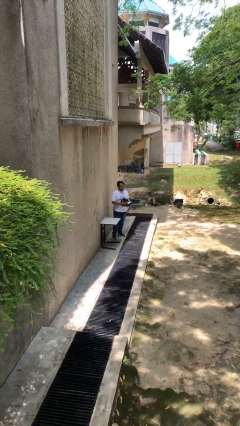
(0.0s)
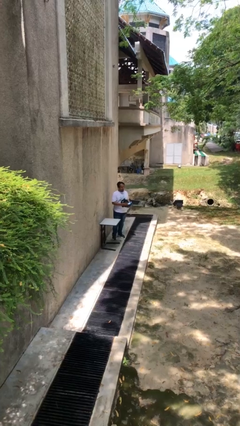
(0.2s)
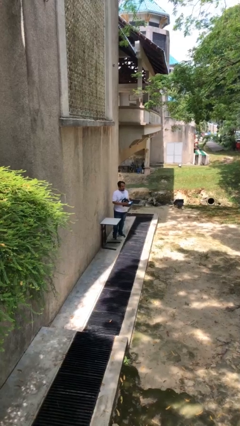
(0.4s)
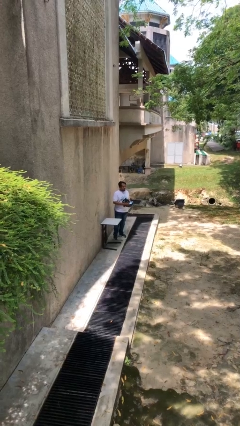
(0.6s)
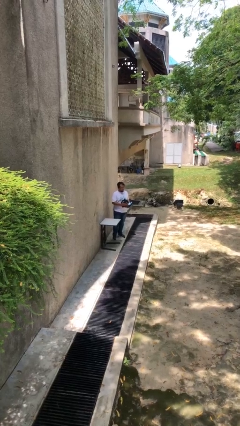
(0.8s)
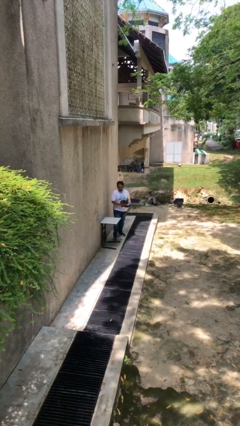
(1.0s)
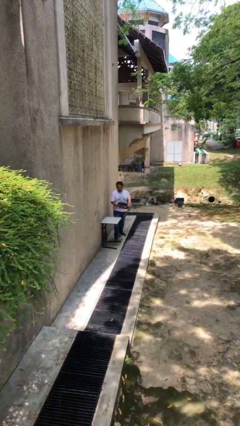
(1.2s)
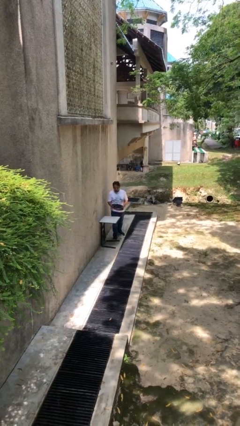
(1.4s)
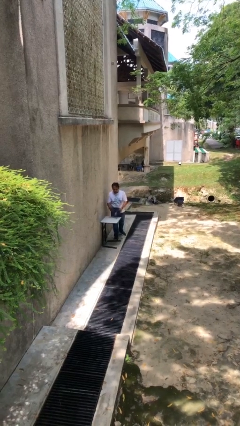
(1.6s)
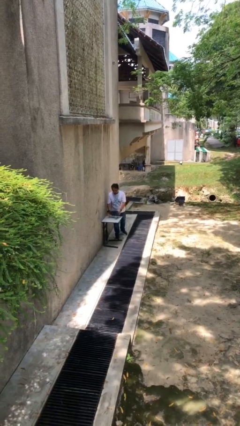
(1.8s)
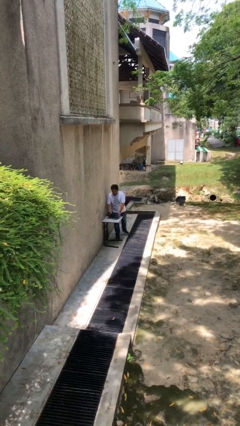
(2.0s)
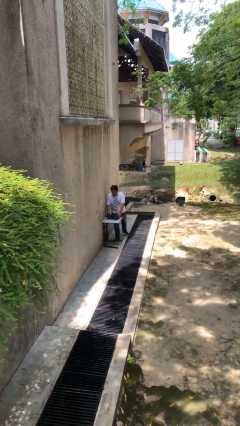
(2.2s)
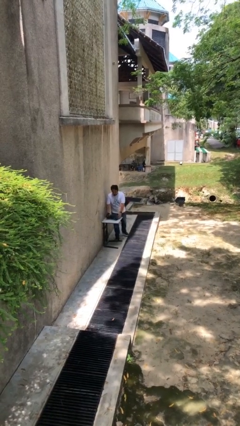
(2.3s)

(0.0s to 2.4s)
person puts down object on table

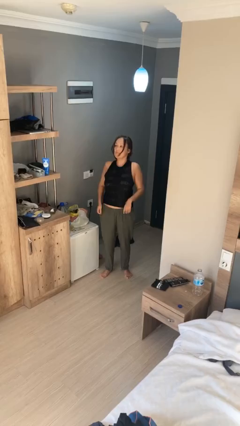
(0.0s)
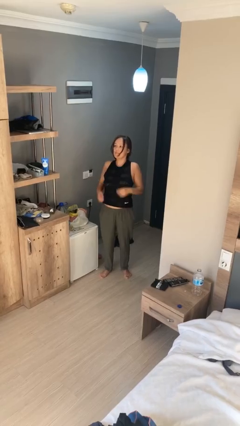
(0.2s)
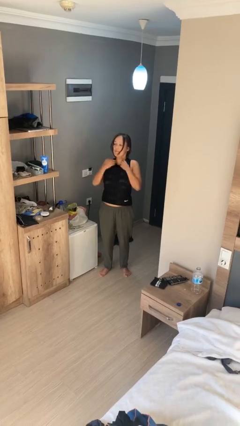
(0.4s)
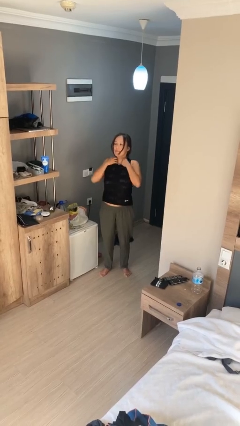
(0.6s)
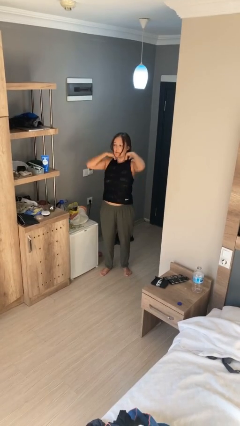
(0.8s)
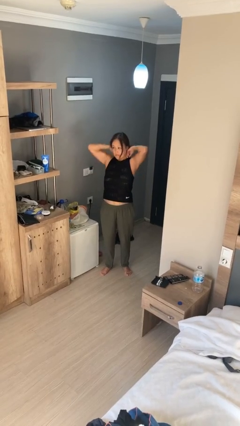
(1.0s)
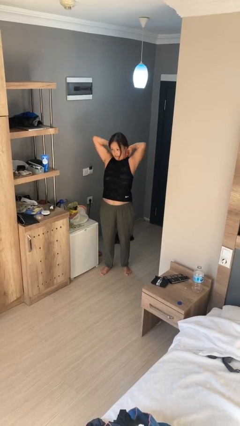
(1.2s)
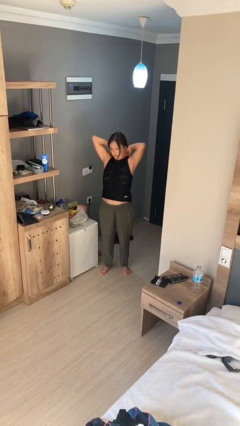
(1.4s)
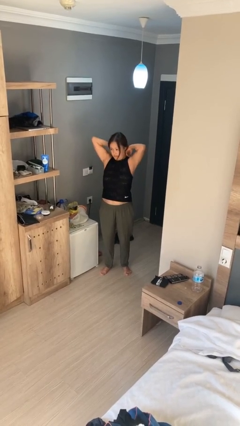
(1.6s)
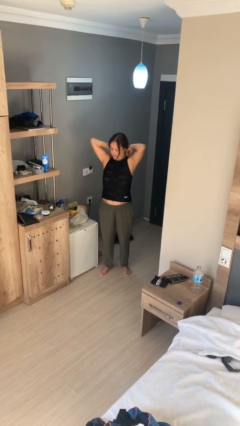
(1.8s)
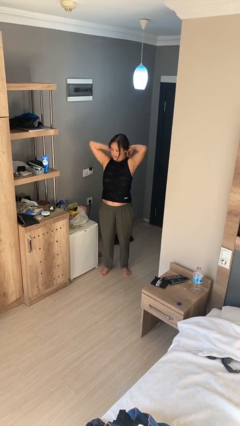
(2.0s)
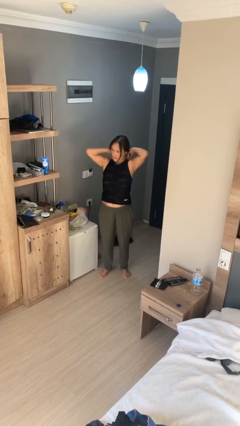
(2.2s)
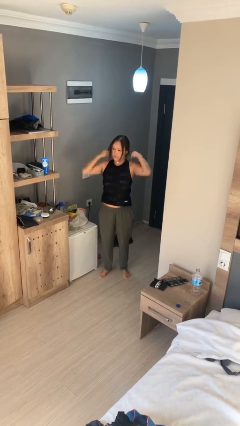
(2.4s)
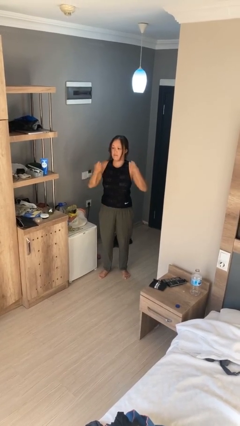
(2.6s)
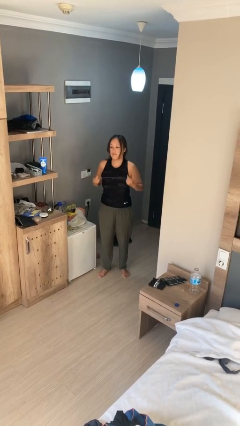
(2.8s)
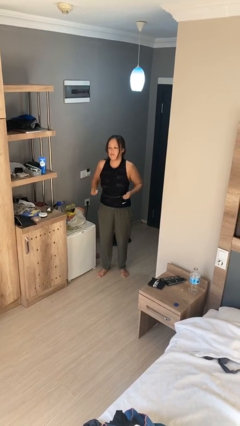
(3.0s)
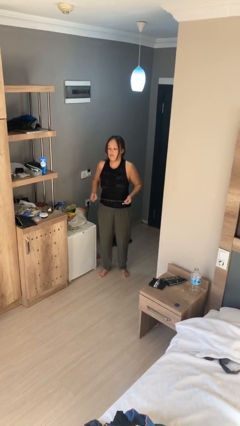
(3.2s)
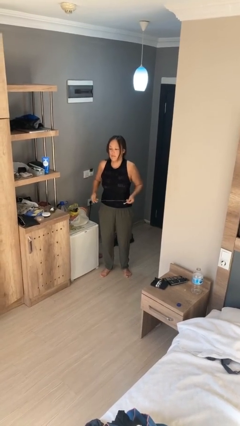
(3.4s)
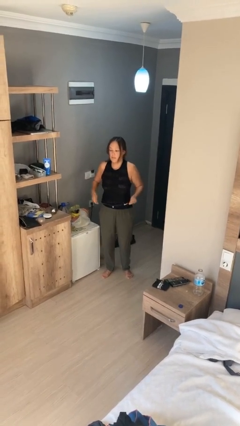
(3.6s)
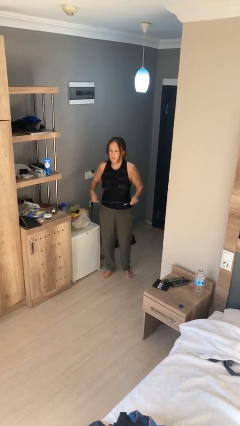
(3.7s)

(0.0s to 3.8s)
person takes off necklace

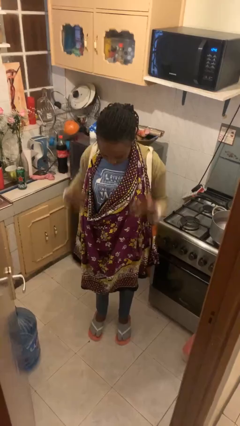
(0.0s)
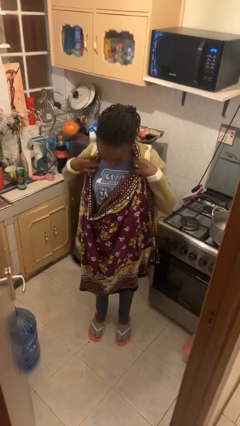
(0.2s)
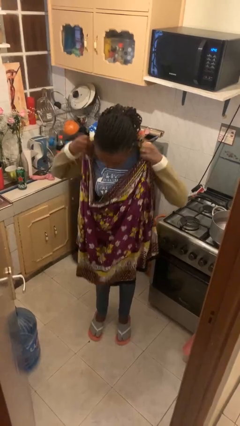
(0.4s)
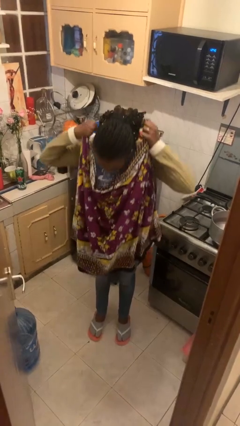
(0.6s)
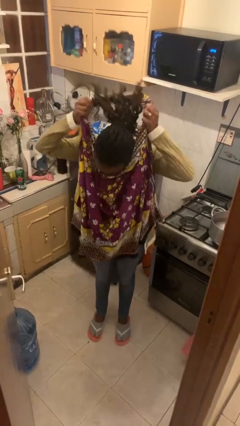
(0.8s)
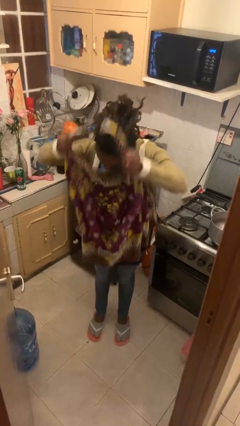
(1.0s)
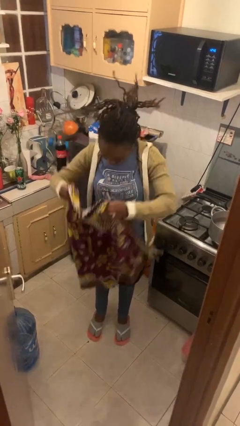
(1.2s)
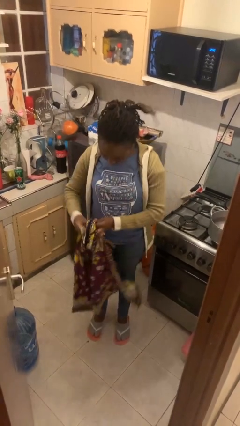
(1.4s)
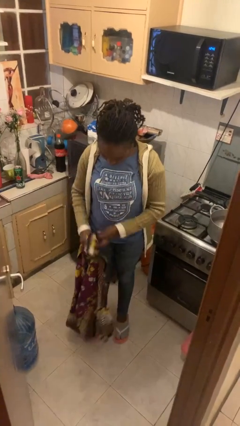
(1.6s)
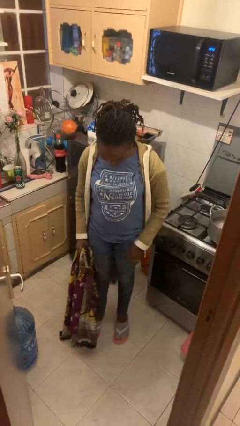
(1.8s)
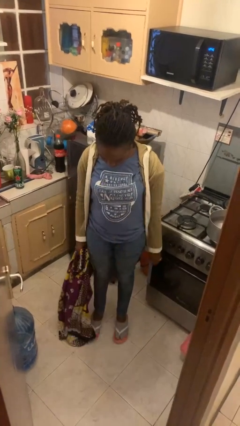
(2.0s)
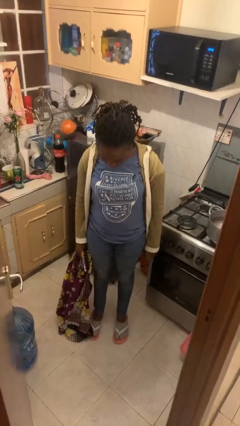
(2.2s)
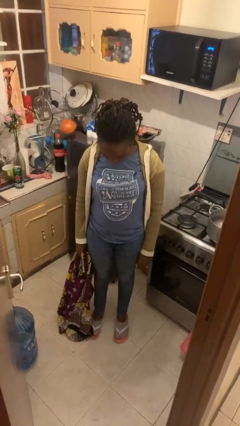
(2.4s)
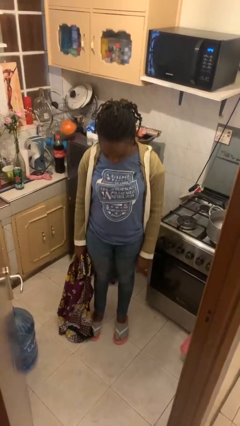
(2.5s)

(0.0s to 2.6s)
person takes off apron

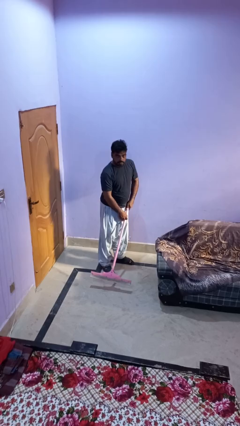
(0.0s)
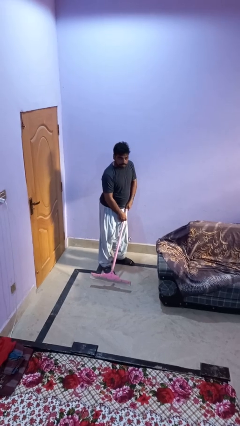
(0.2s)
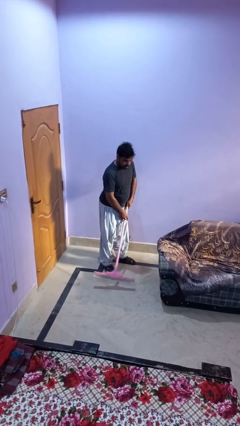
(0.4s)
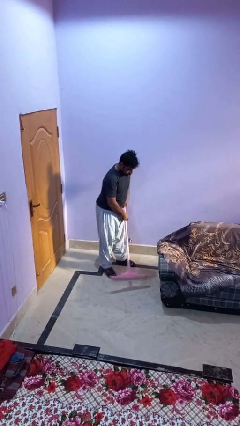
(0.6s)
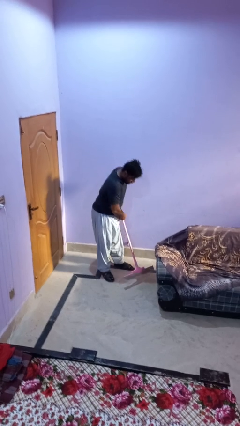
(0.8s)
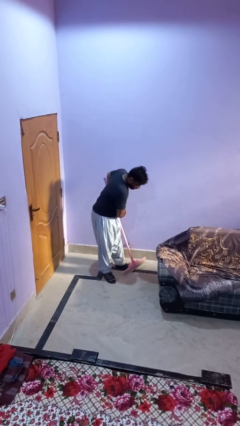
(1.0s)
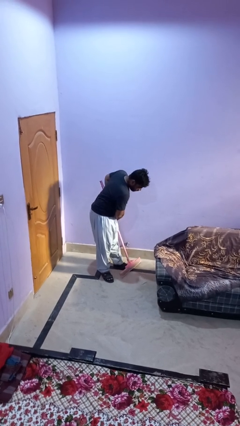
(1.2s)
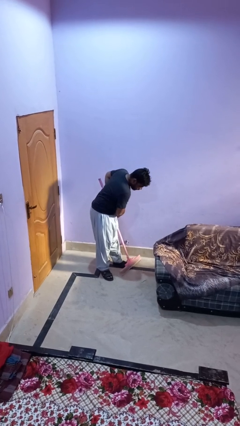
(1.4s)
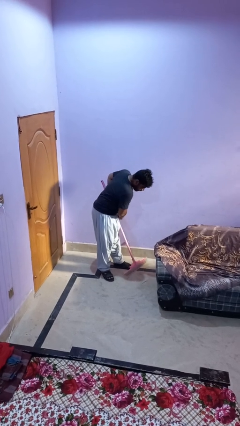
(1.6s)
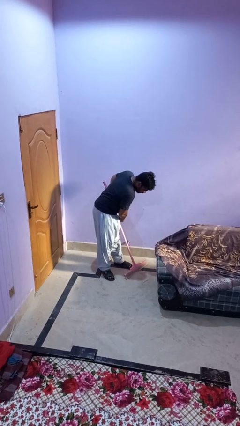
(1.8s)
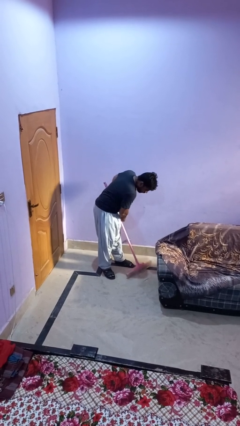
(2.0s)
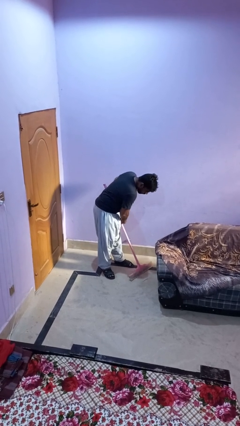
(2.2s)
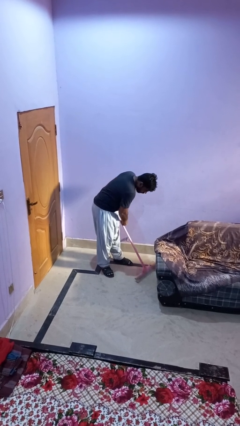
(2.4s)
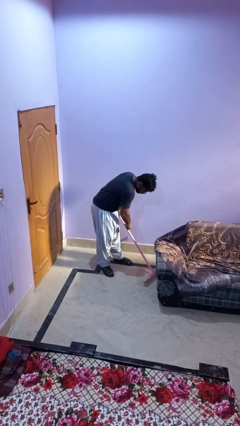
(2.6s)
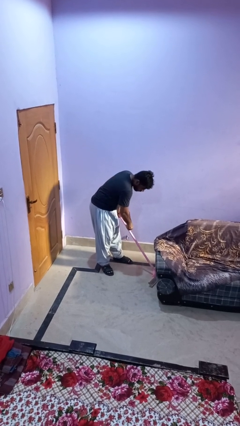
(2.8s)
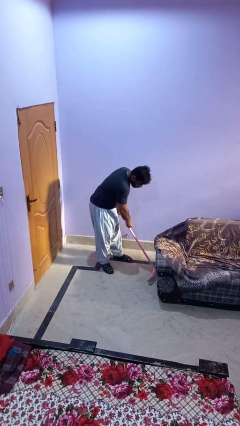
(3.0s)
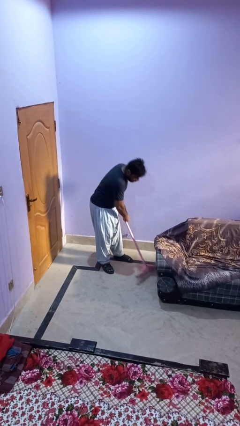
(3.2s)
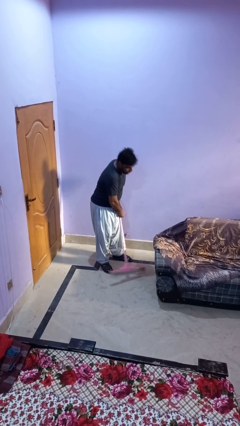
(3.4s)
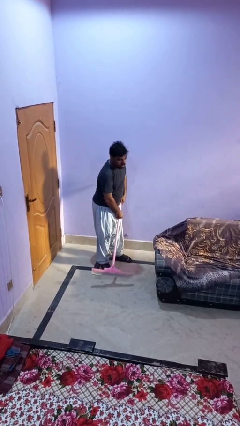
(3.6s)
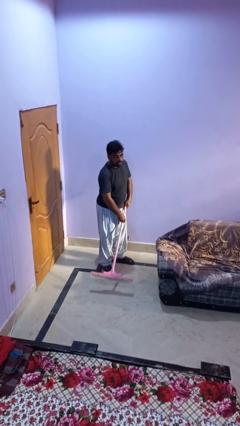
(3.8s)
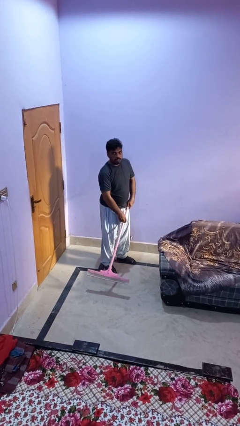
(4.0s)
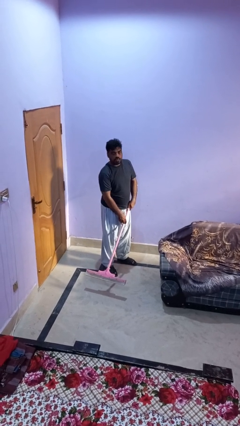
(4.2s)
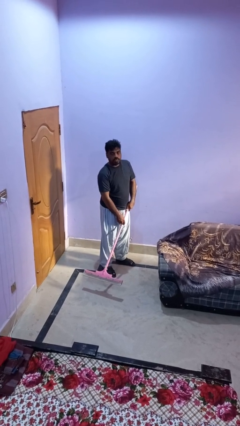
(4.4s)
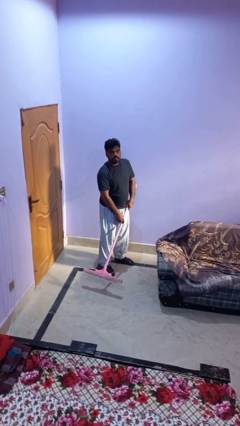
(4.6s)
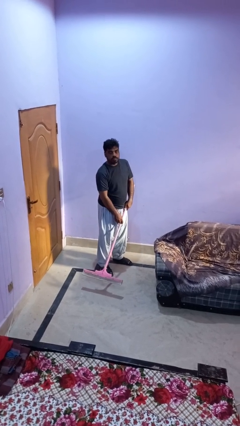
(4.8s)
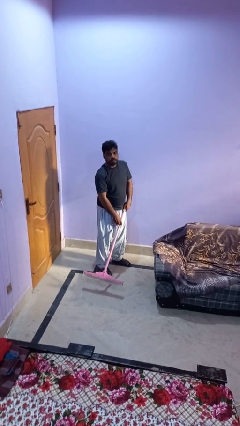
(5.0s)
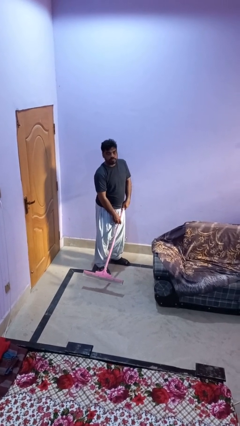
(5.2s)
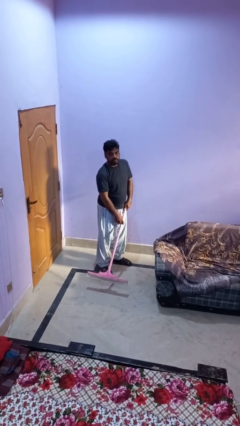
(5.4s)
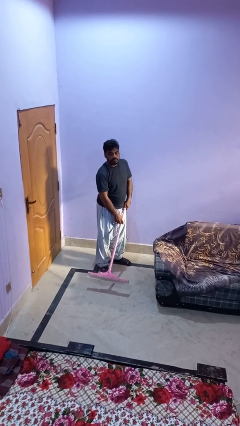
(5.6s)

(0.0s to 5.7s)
person vacuums carpet

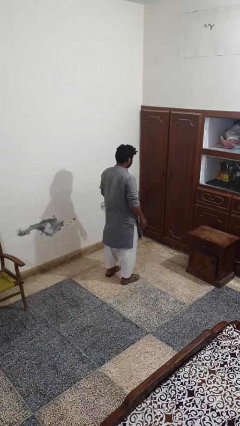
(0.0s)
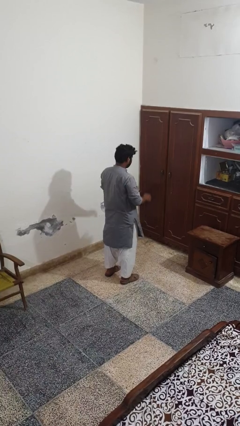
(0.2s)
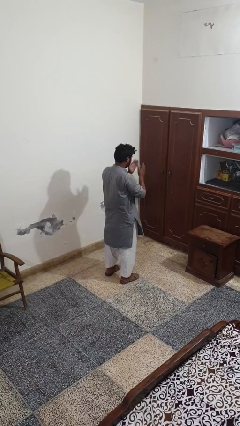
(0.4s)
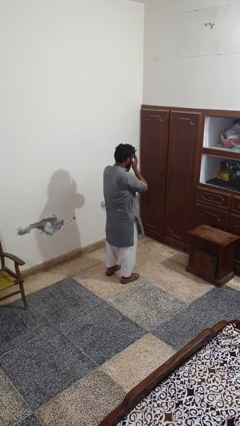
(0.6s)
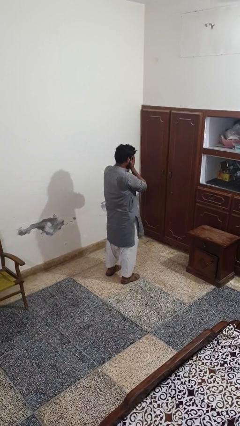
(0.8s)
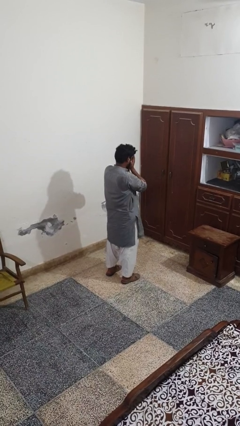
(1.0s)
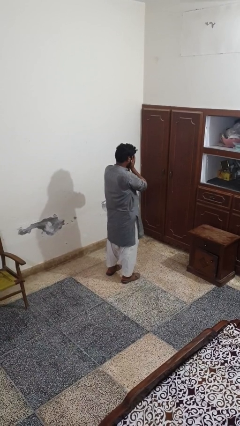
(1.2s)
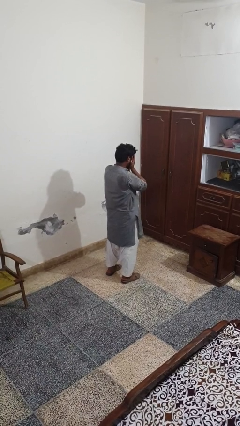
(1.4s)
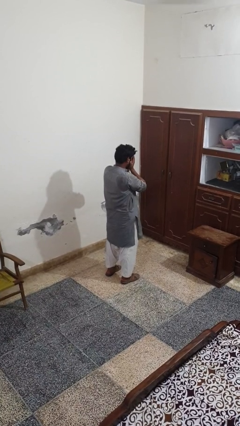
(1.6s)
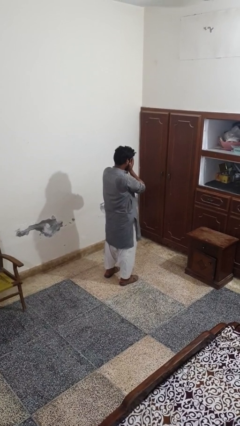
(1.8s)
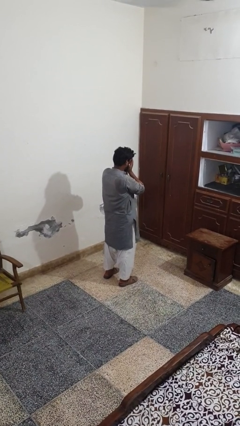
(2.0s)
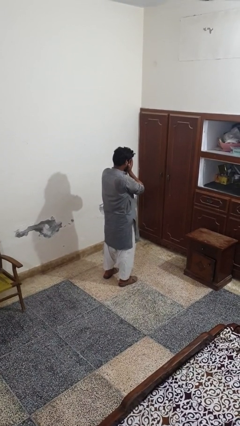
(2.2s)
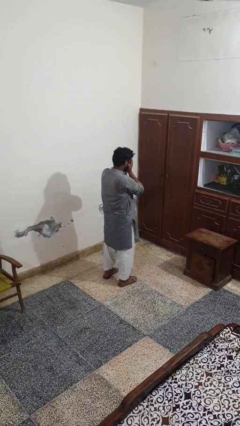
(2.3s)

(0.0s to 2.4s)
person covers face with hands

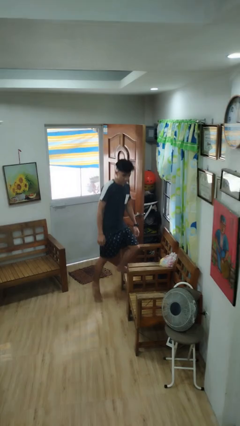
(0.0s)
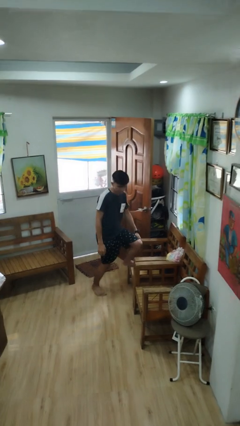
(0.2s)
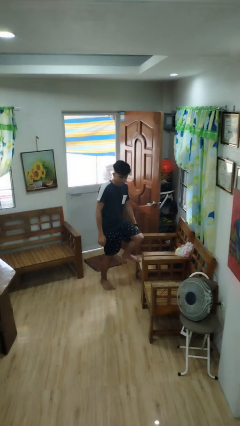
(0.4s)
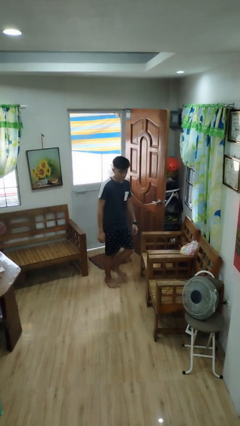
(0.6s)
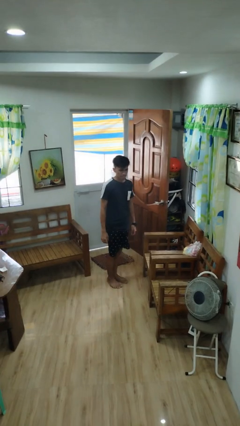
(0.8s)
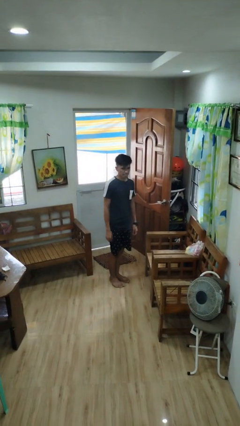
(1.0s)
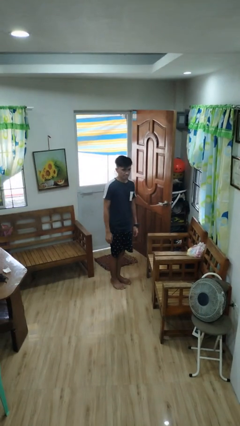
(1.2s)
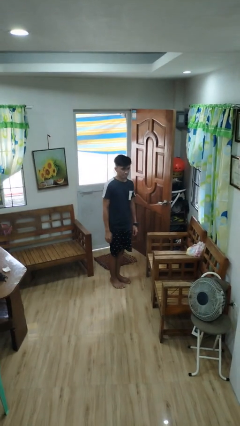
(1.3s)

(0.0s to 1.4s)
person climbs off chair
